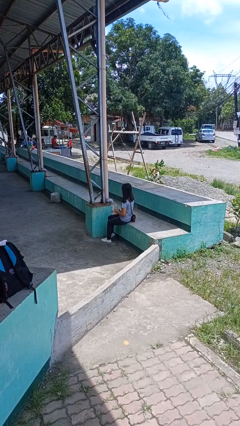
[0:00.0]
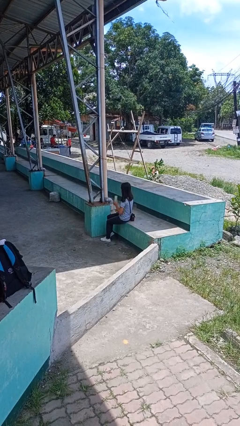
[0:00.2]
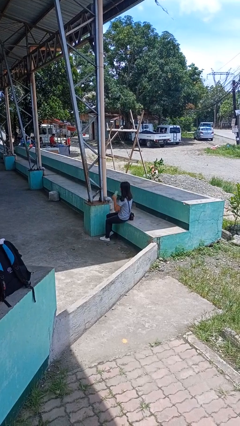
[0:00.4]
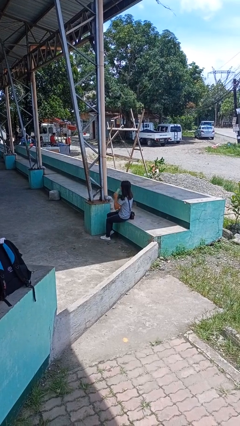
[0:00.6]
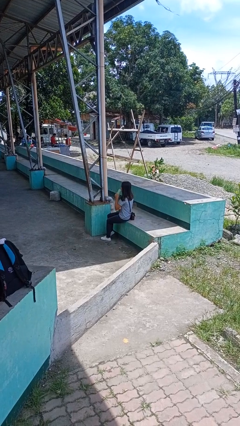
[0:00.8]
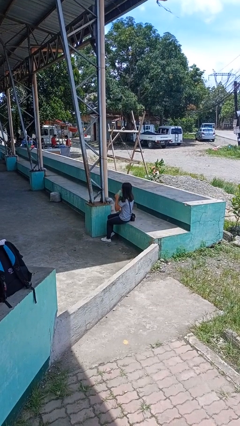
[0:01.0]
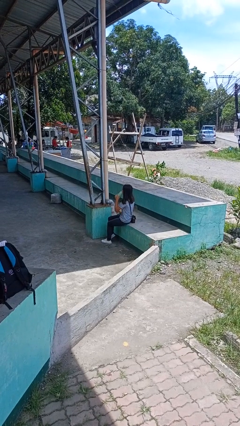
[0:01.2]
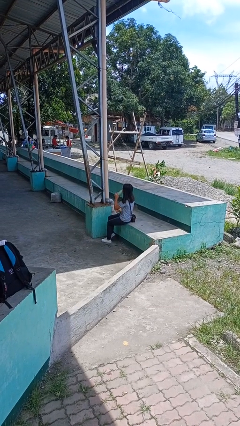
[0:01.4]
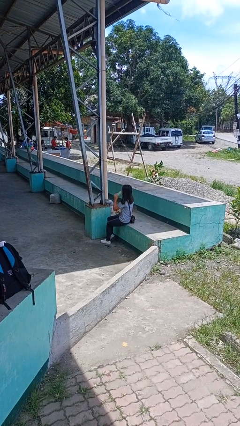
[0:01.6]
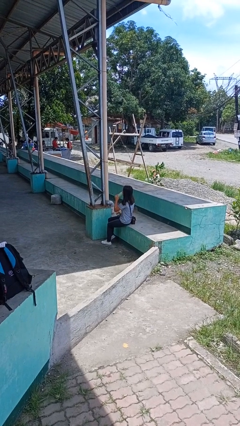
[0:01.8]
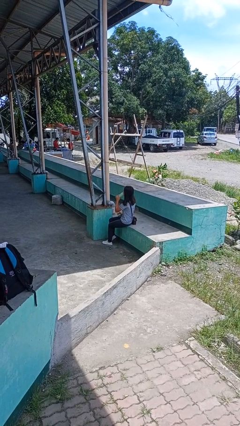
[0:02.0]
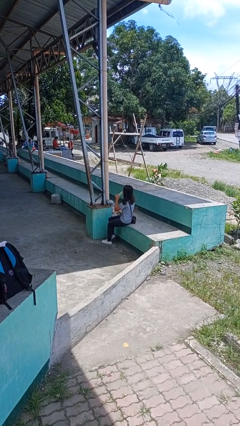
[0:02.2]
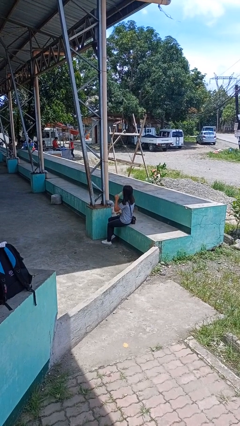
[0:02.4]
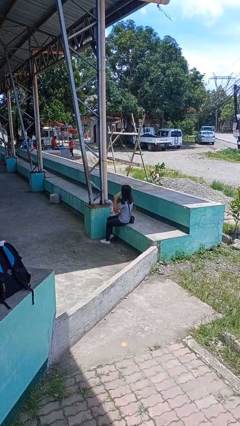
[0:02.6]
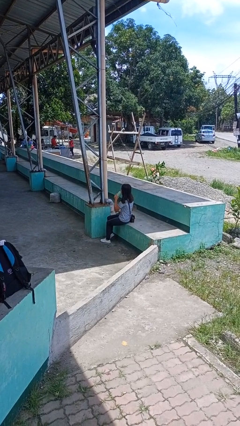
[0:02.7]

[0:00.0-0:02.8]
person drinks from bottle

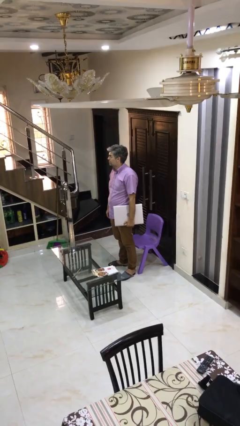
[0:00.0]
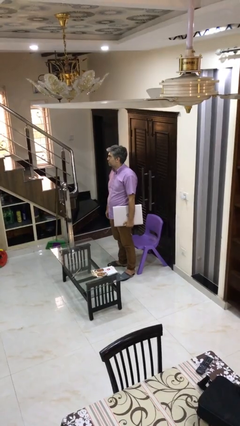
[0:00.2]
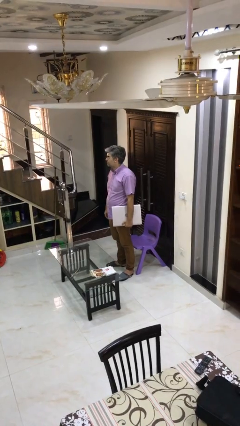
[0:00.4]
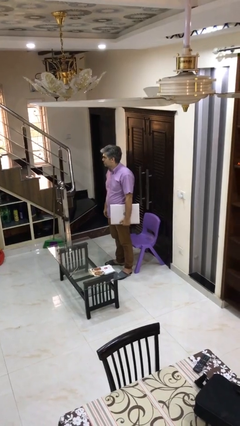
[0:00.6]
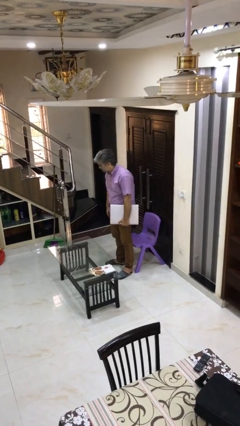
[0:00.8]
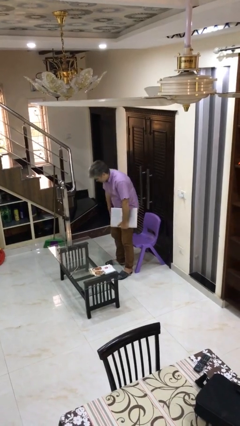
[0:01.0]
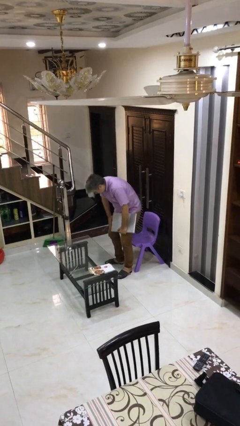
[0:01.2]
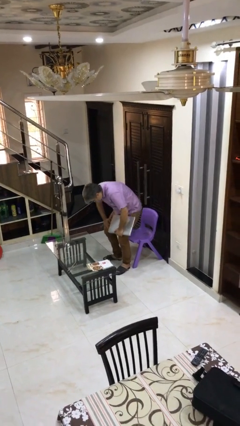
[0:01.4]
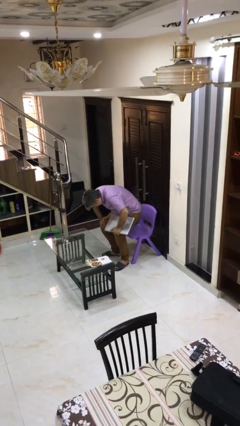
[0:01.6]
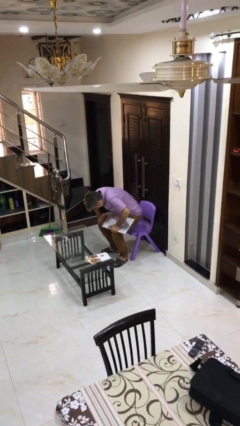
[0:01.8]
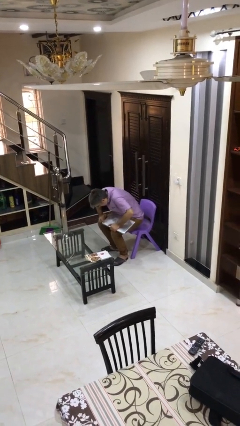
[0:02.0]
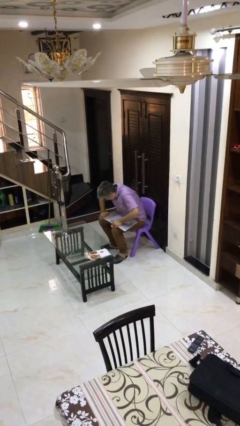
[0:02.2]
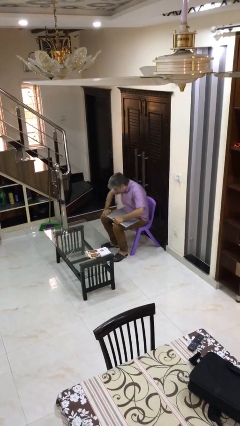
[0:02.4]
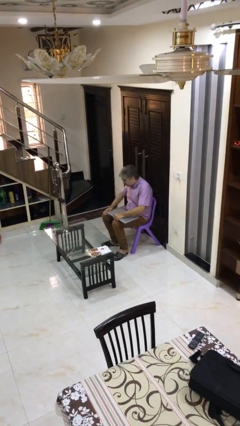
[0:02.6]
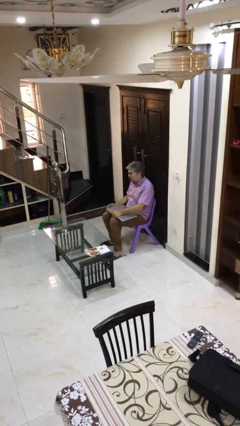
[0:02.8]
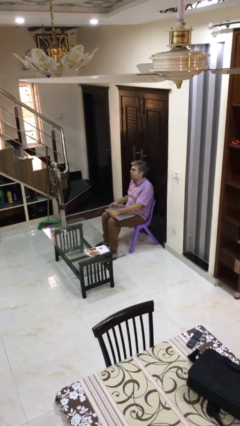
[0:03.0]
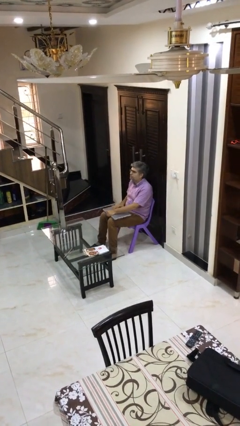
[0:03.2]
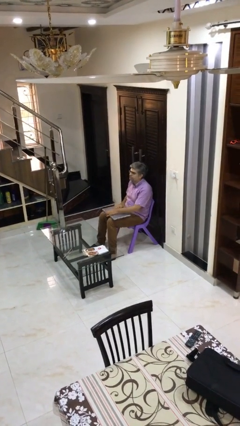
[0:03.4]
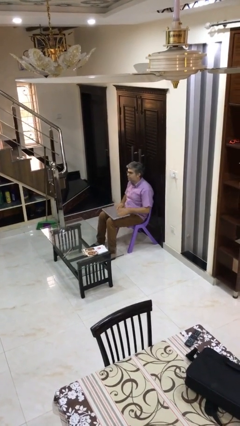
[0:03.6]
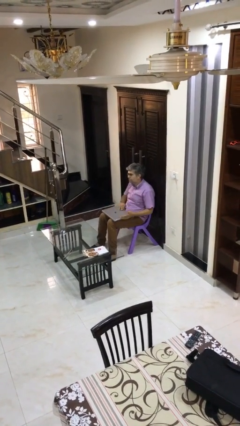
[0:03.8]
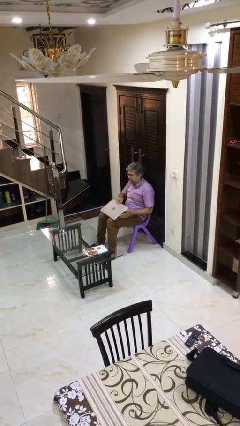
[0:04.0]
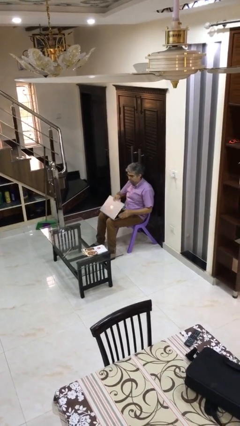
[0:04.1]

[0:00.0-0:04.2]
person sits down

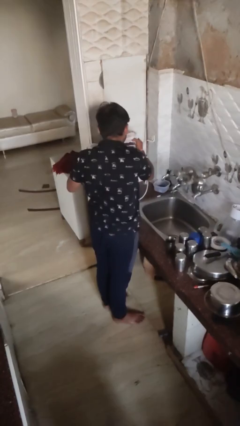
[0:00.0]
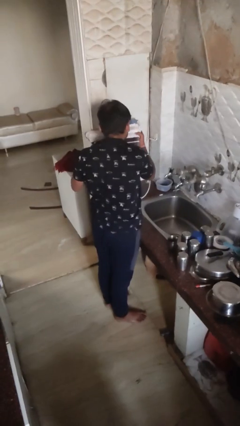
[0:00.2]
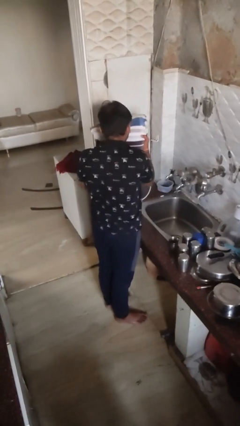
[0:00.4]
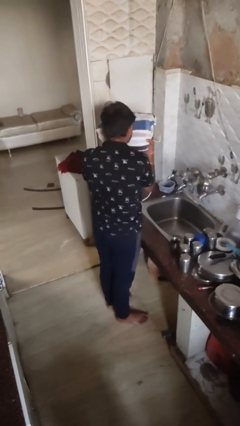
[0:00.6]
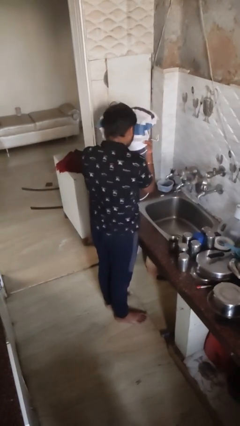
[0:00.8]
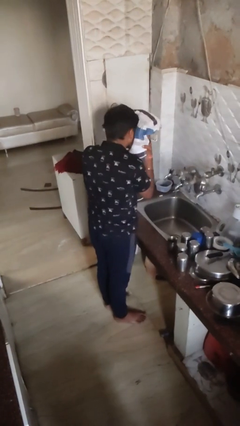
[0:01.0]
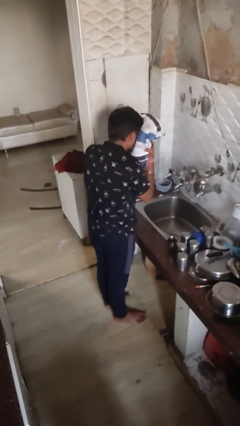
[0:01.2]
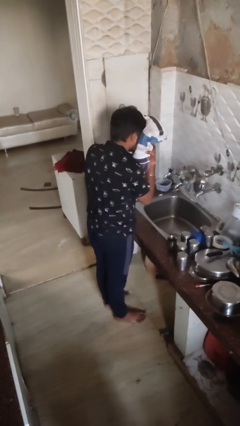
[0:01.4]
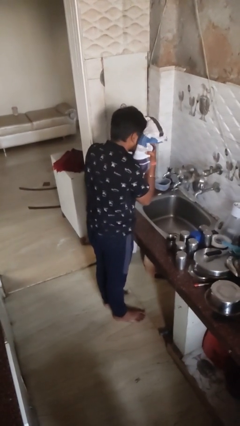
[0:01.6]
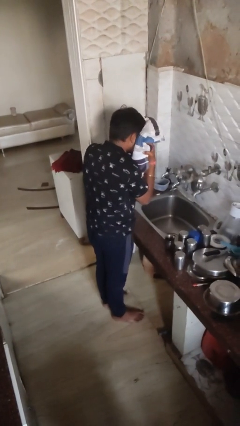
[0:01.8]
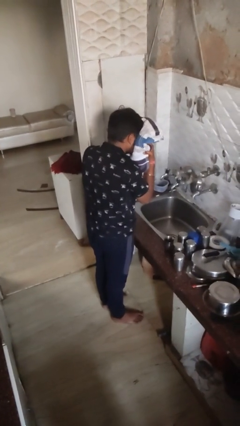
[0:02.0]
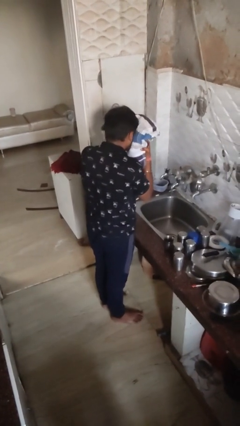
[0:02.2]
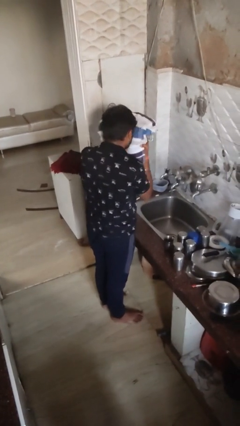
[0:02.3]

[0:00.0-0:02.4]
person dries face with towel

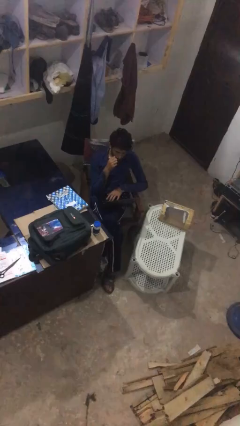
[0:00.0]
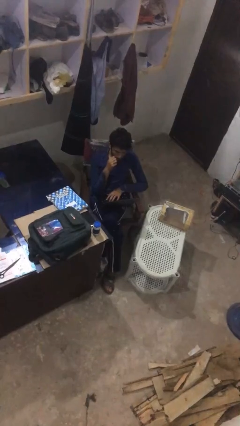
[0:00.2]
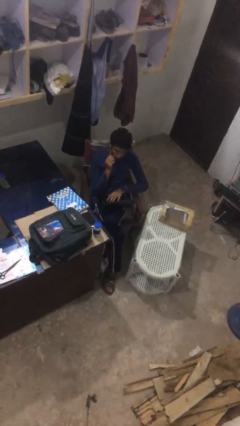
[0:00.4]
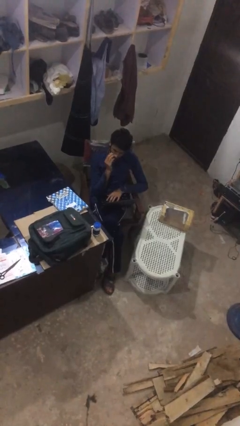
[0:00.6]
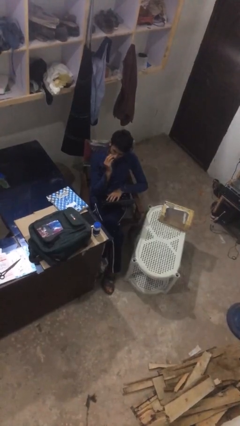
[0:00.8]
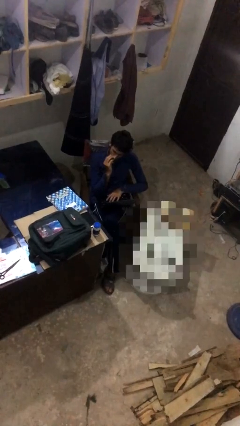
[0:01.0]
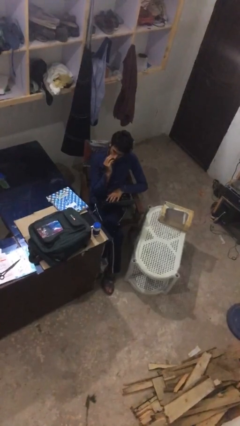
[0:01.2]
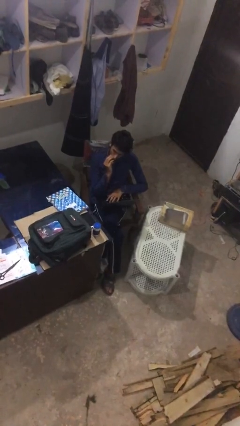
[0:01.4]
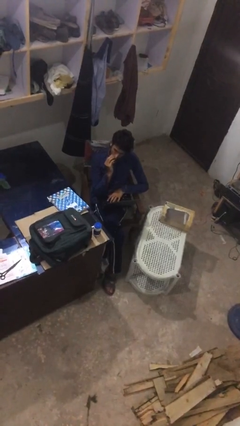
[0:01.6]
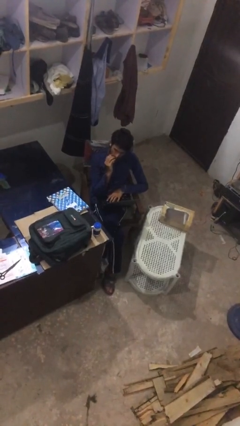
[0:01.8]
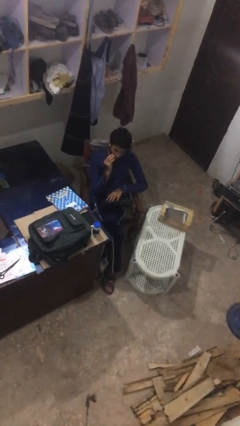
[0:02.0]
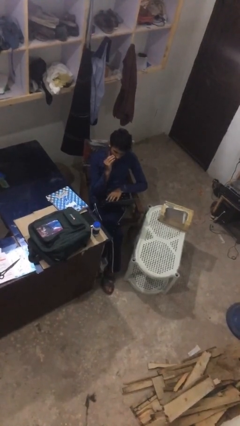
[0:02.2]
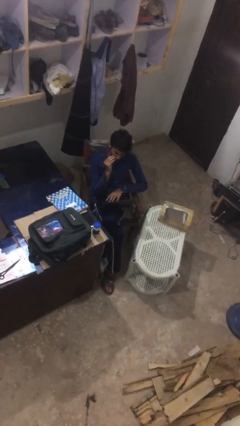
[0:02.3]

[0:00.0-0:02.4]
person interacts with laptop

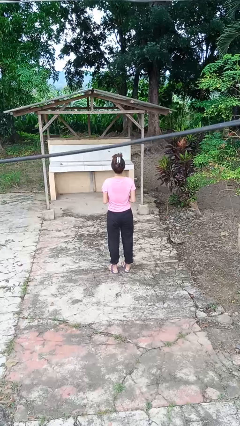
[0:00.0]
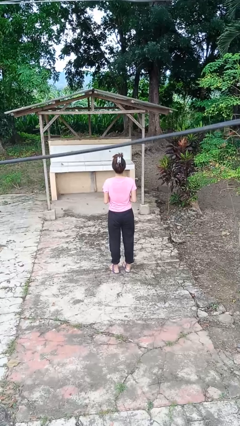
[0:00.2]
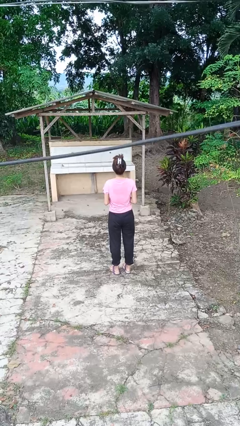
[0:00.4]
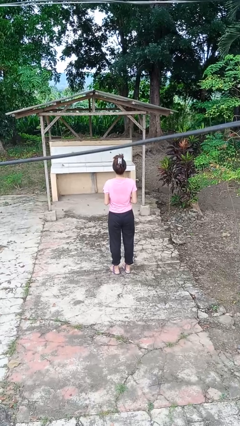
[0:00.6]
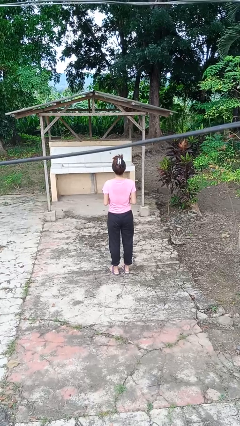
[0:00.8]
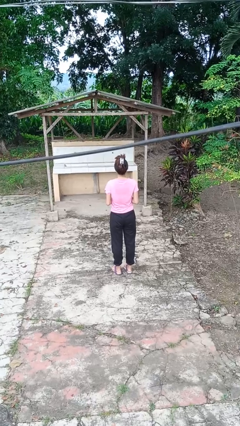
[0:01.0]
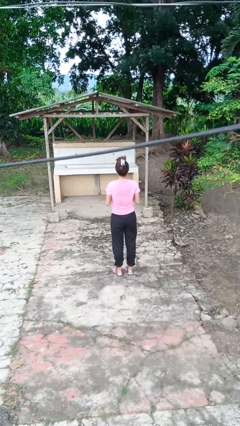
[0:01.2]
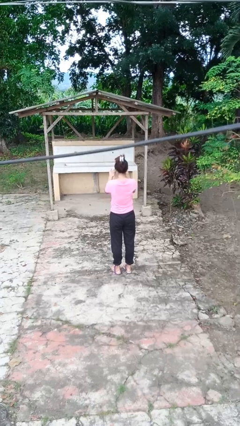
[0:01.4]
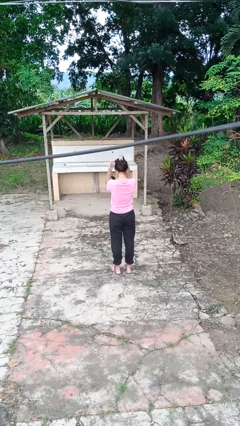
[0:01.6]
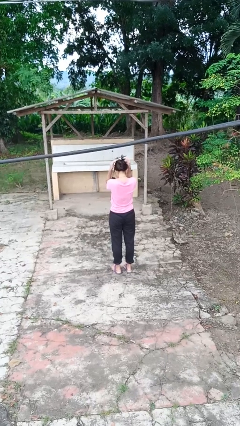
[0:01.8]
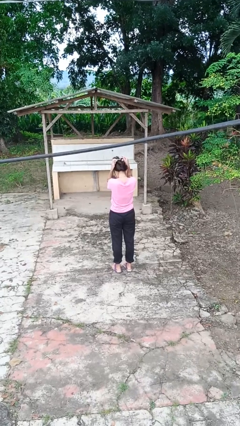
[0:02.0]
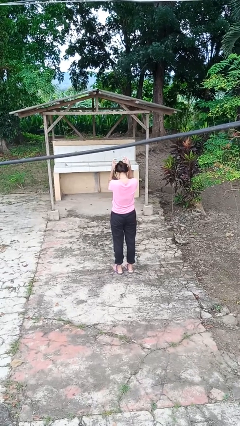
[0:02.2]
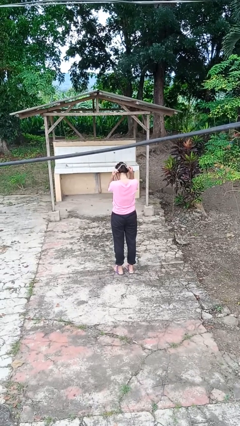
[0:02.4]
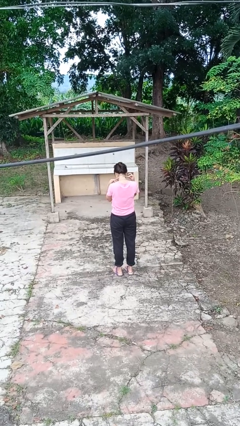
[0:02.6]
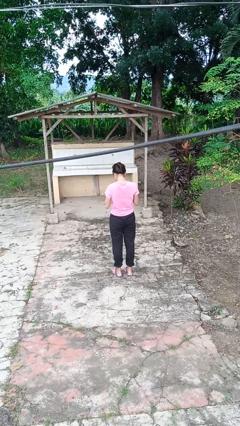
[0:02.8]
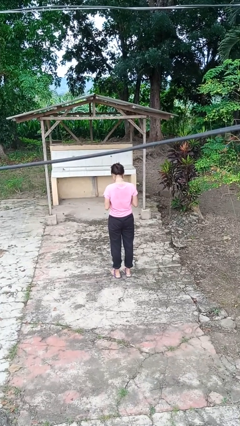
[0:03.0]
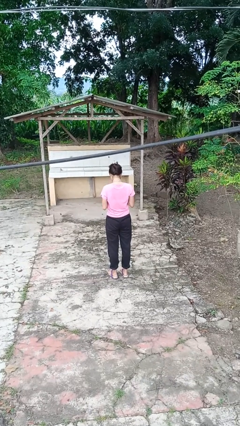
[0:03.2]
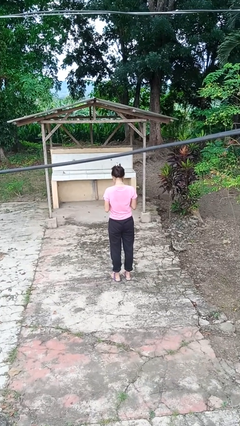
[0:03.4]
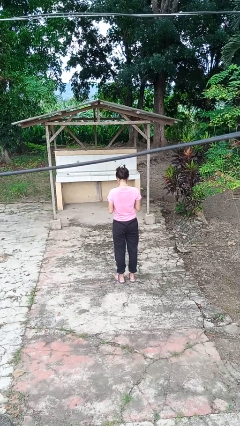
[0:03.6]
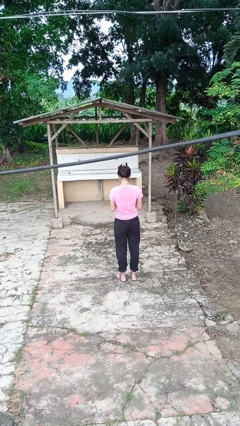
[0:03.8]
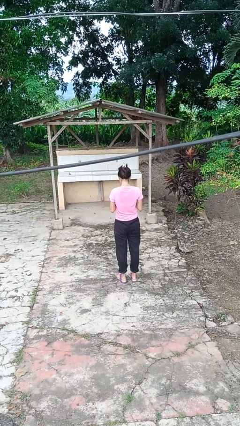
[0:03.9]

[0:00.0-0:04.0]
person puts on necklace

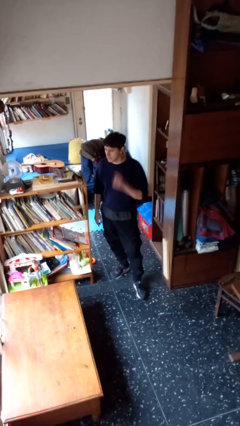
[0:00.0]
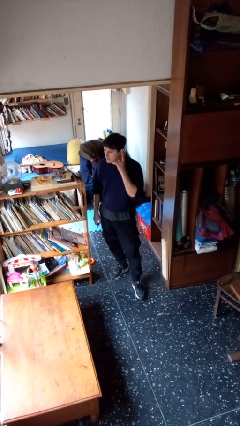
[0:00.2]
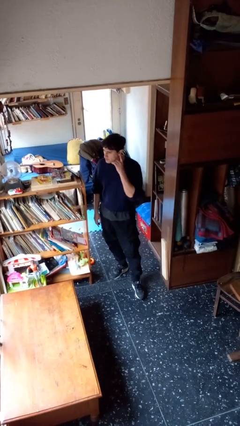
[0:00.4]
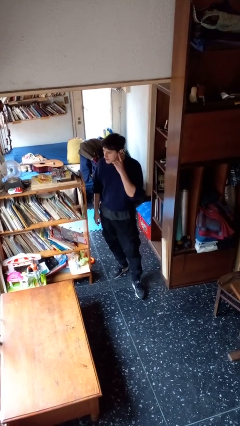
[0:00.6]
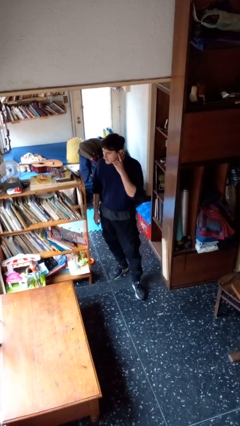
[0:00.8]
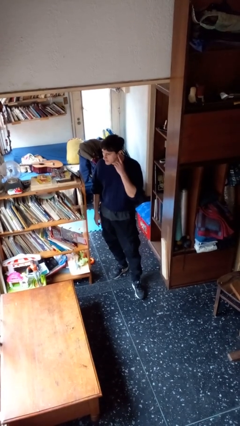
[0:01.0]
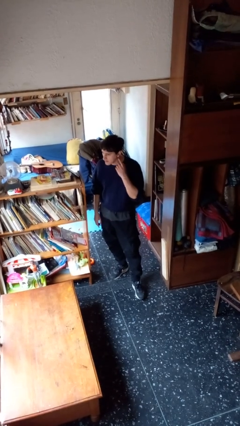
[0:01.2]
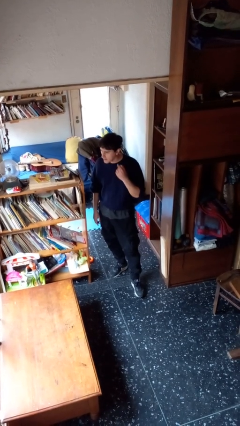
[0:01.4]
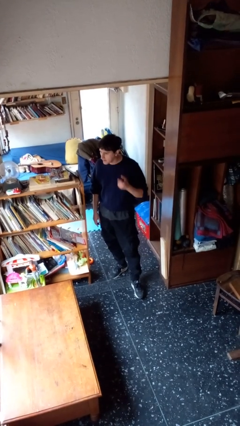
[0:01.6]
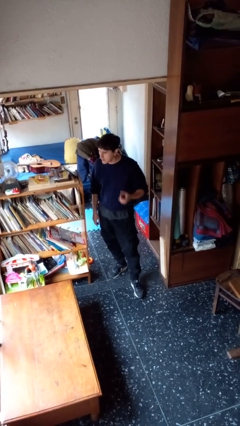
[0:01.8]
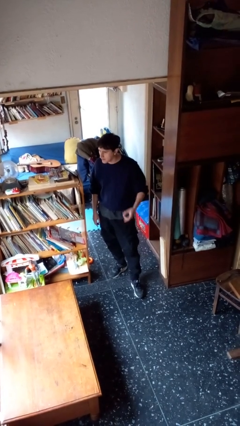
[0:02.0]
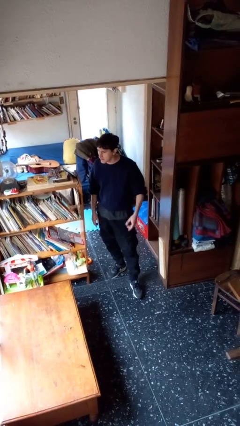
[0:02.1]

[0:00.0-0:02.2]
person gestures listen closely
